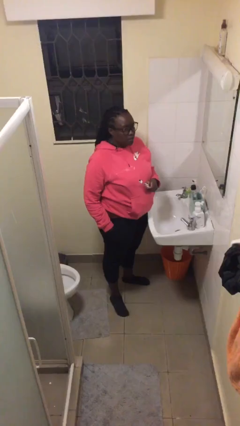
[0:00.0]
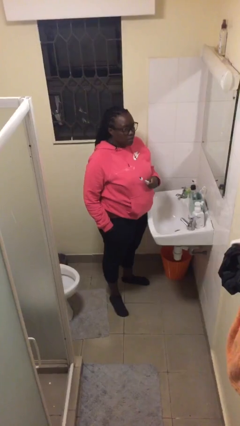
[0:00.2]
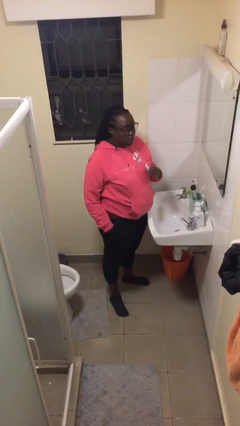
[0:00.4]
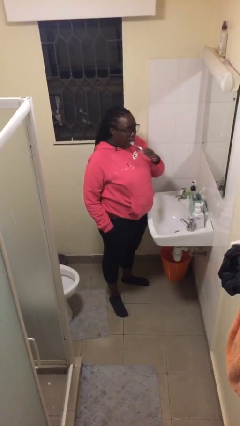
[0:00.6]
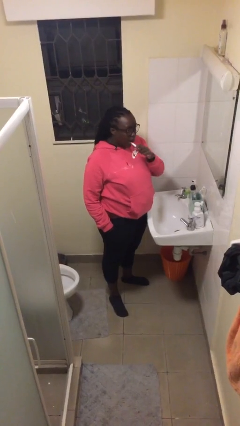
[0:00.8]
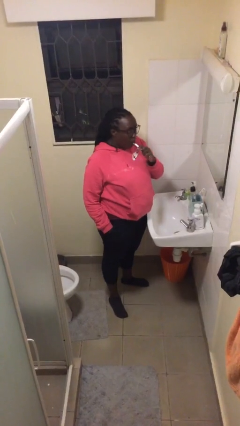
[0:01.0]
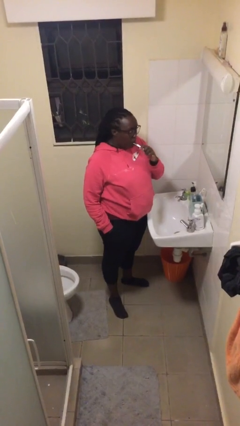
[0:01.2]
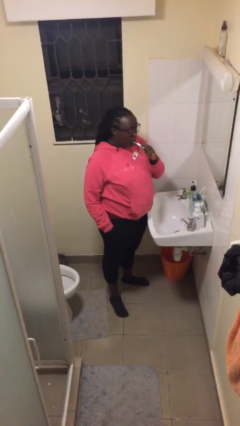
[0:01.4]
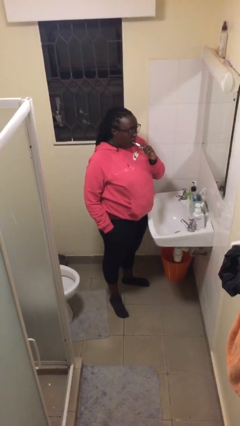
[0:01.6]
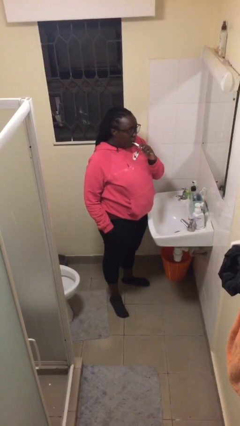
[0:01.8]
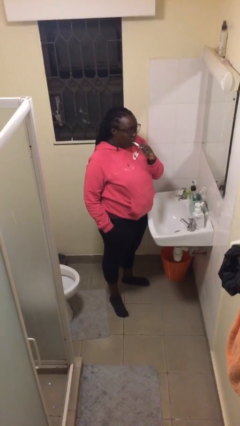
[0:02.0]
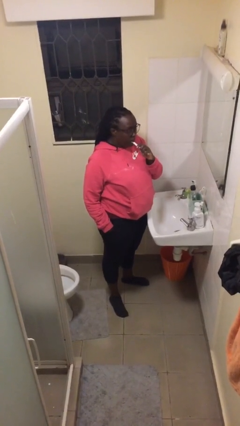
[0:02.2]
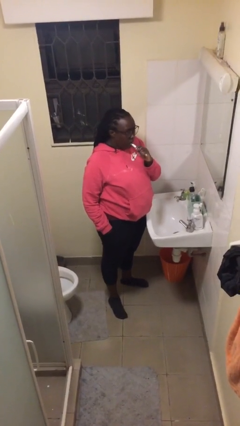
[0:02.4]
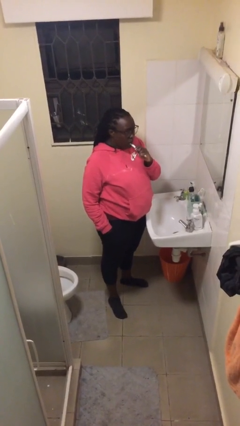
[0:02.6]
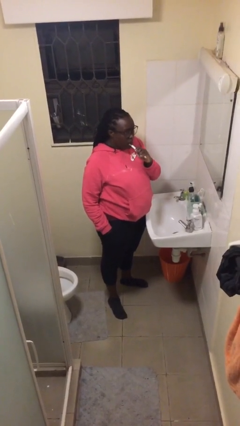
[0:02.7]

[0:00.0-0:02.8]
person brushes teeth

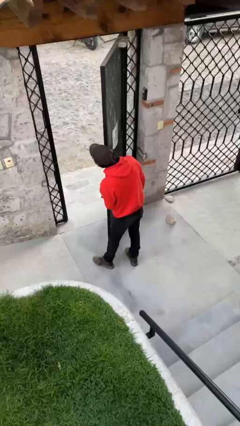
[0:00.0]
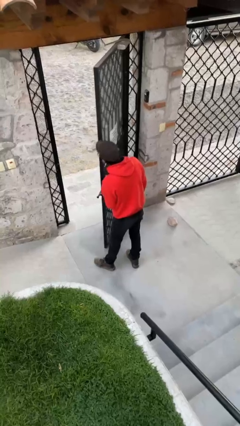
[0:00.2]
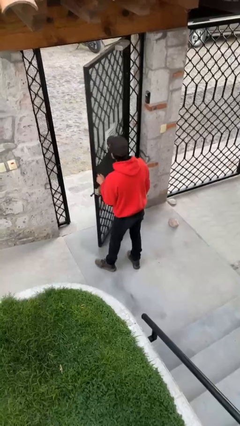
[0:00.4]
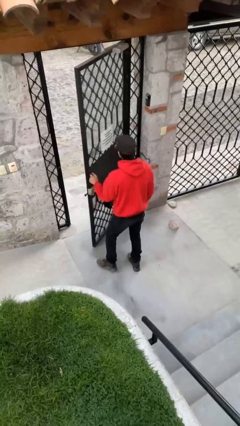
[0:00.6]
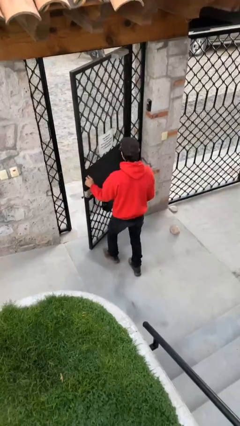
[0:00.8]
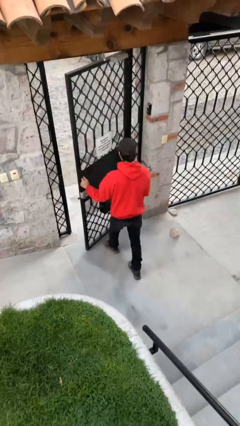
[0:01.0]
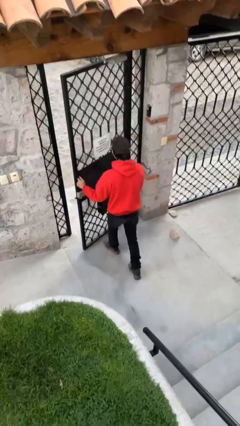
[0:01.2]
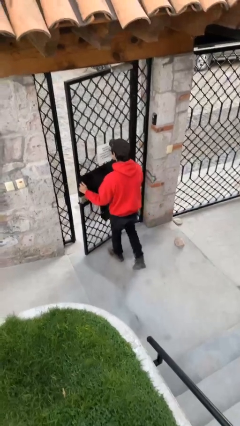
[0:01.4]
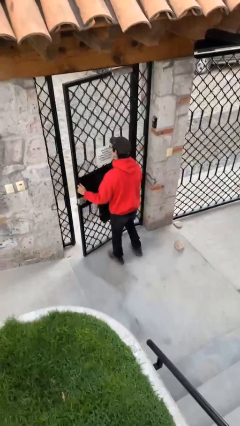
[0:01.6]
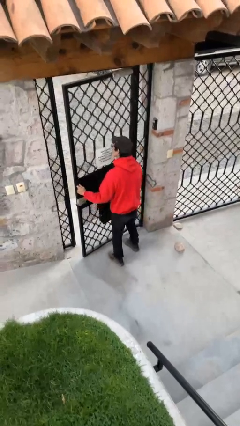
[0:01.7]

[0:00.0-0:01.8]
person closes facility door

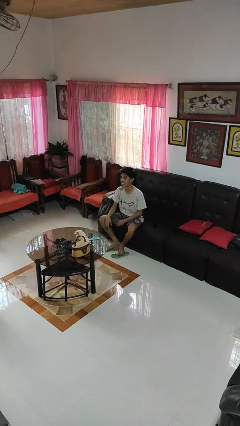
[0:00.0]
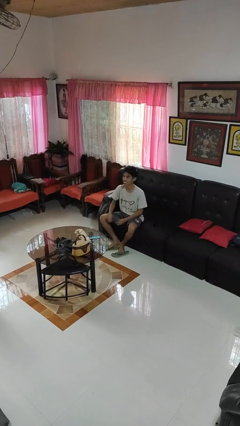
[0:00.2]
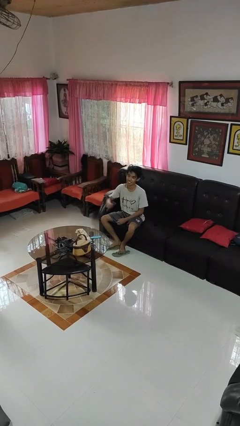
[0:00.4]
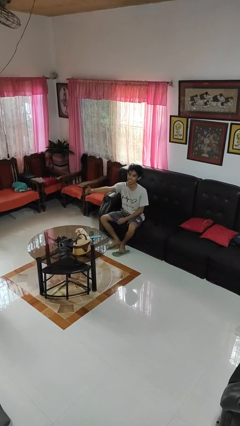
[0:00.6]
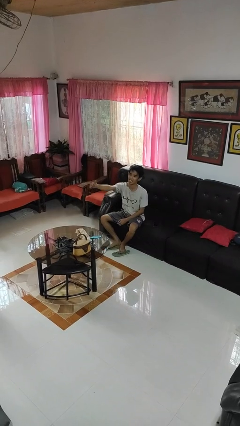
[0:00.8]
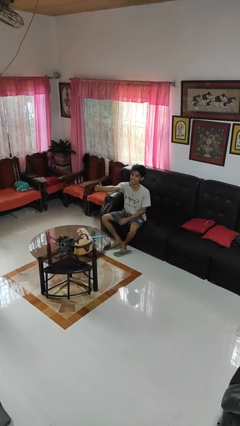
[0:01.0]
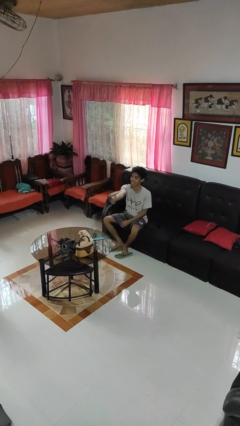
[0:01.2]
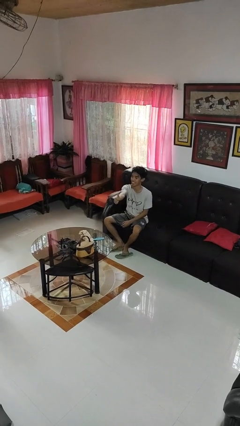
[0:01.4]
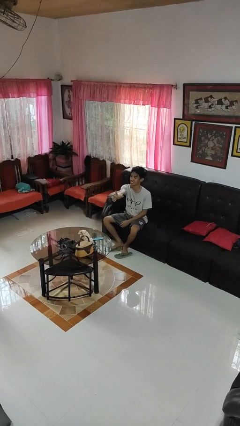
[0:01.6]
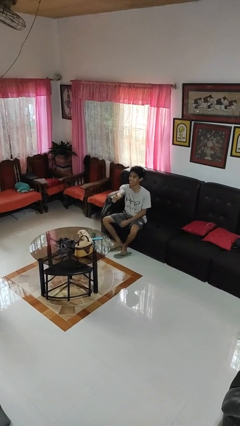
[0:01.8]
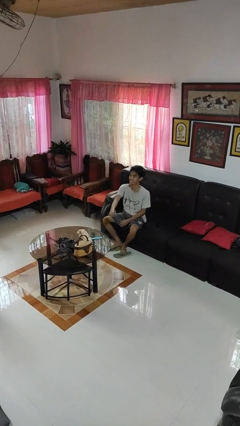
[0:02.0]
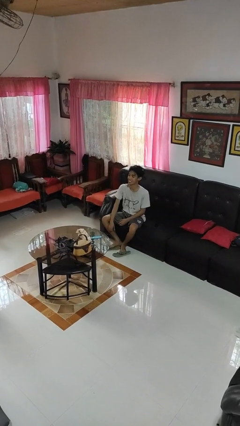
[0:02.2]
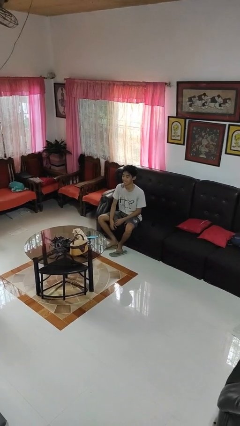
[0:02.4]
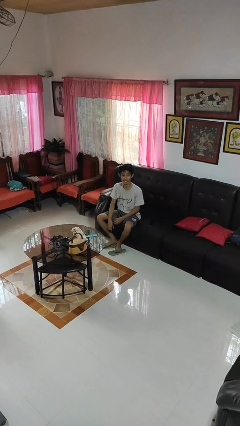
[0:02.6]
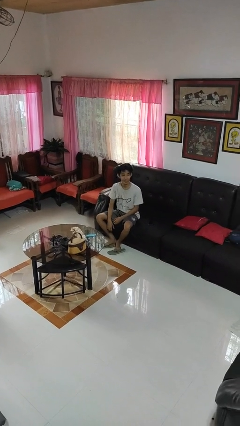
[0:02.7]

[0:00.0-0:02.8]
person gestures thumbs up

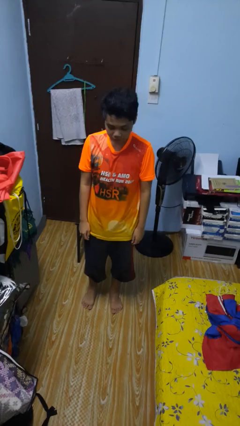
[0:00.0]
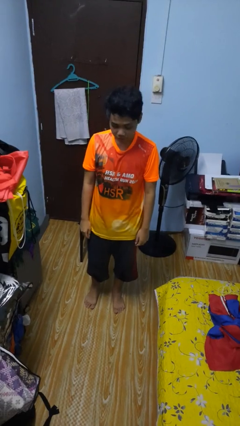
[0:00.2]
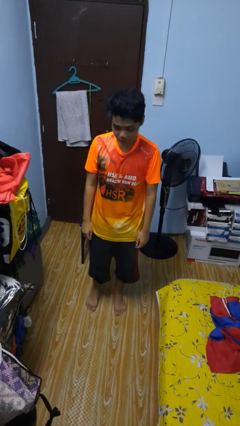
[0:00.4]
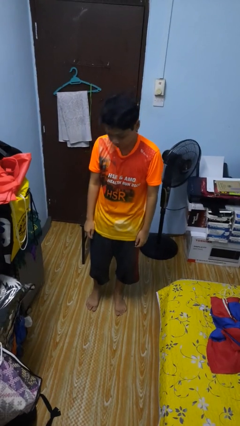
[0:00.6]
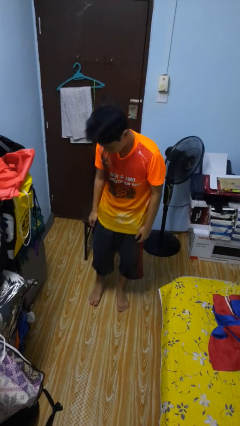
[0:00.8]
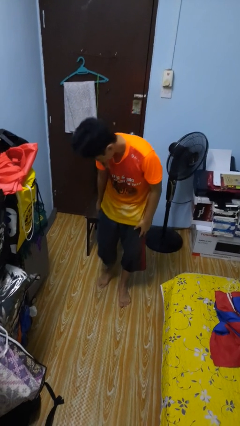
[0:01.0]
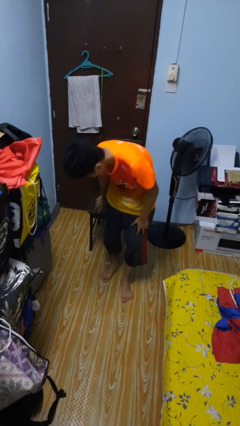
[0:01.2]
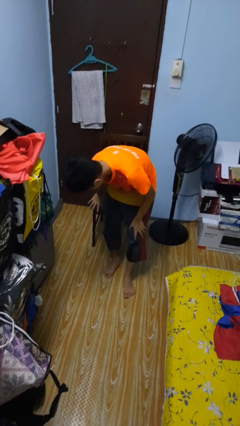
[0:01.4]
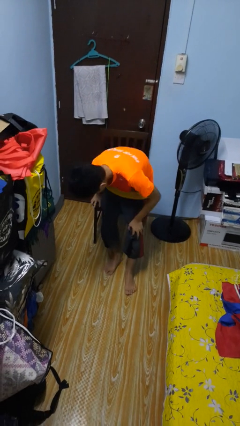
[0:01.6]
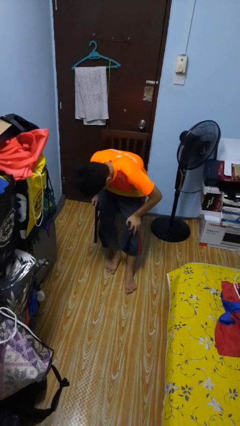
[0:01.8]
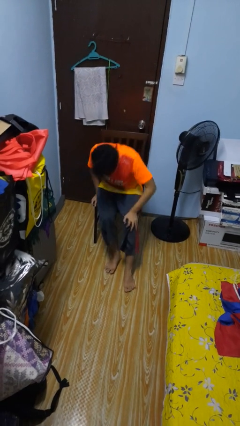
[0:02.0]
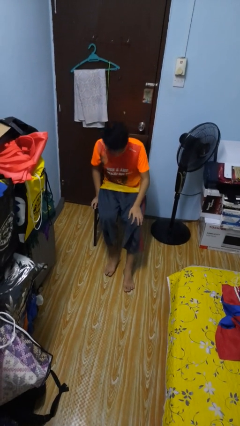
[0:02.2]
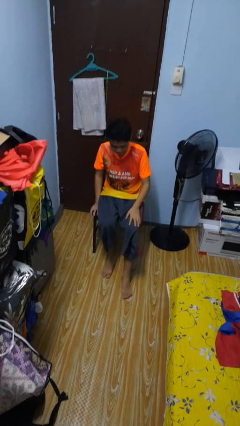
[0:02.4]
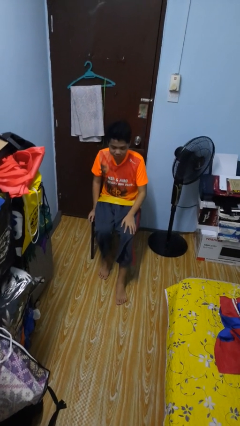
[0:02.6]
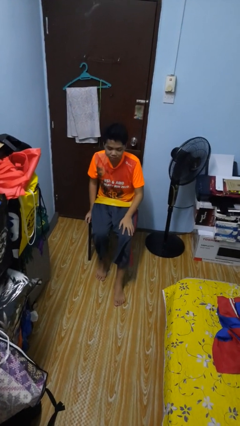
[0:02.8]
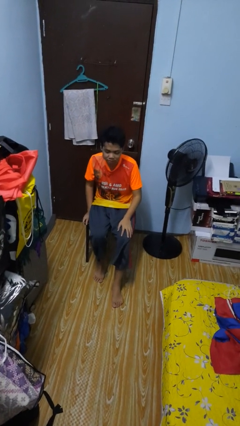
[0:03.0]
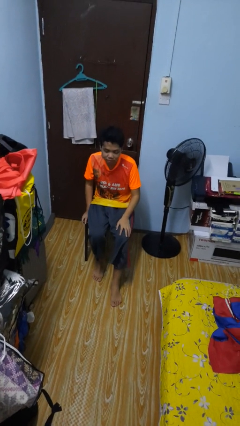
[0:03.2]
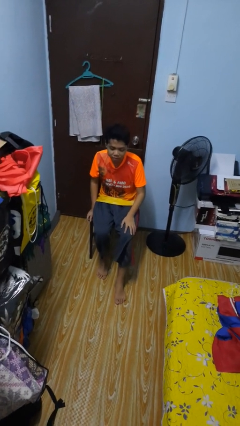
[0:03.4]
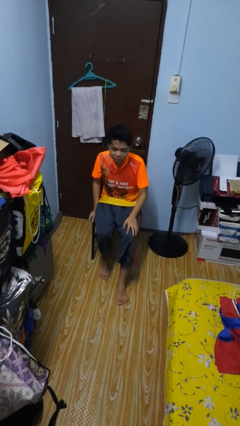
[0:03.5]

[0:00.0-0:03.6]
person sits down

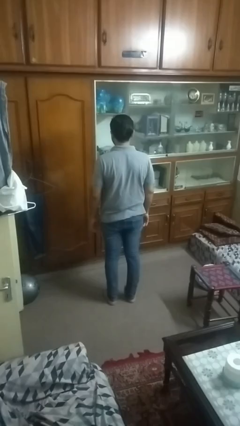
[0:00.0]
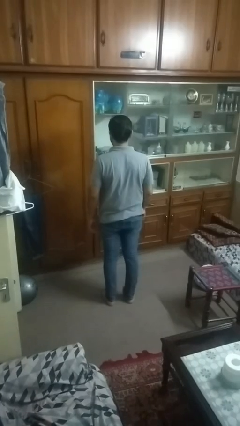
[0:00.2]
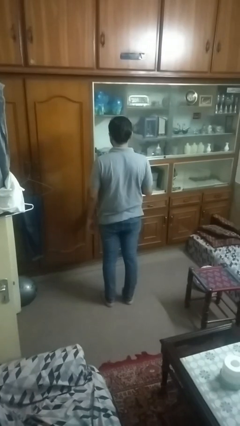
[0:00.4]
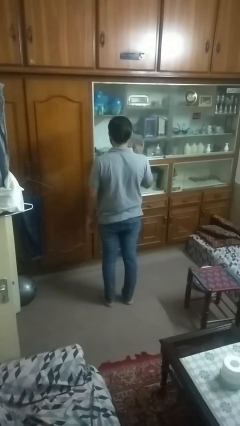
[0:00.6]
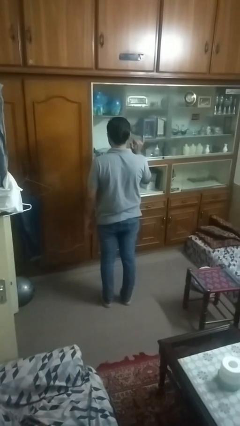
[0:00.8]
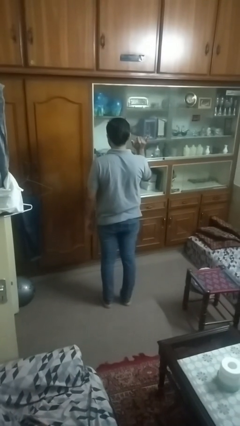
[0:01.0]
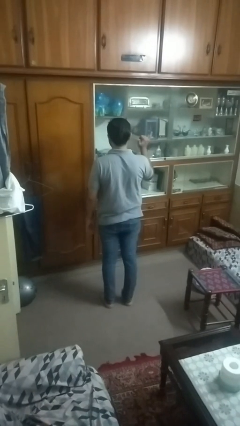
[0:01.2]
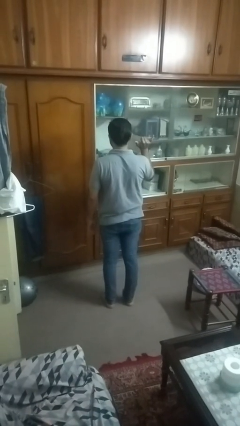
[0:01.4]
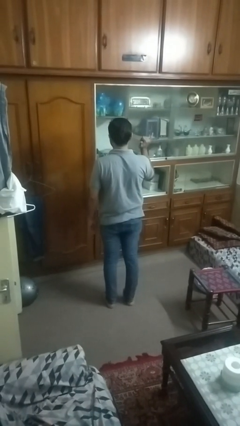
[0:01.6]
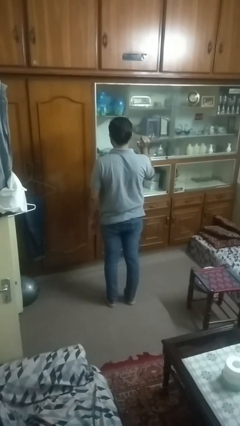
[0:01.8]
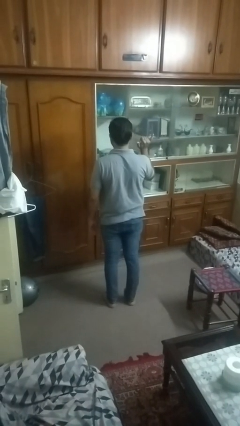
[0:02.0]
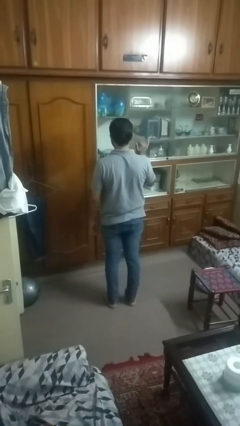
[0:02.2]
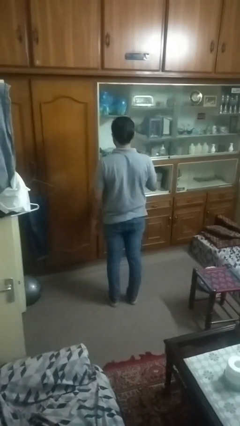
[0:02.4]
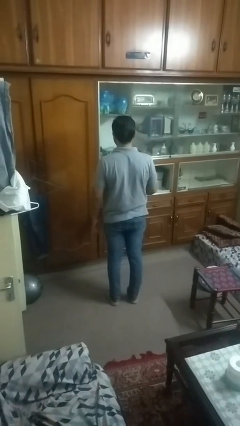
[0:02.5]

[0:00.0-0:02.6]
person gestures hang loose

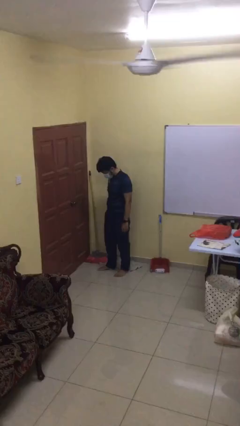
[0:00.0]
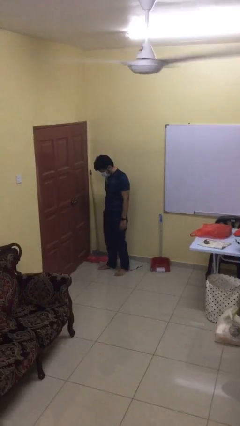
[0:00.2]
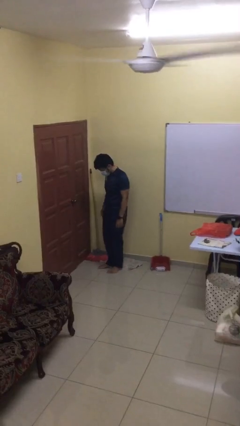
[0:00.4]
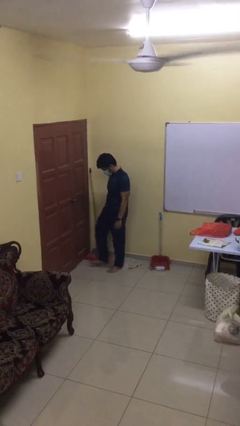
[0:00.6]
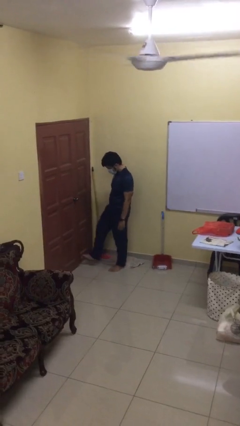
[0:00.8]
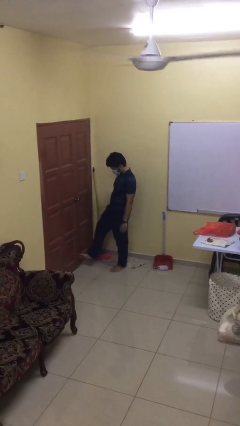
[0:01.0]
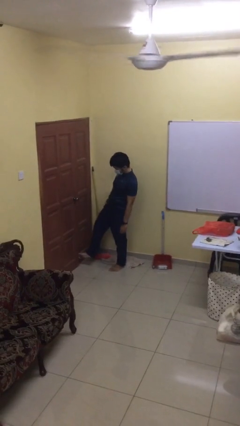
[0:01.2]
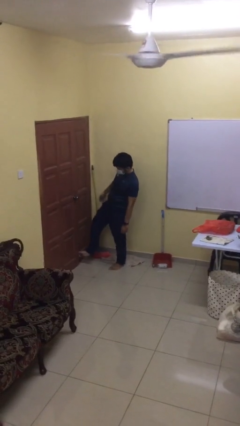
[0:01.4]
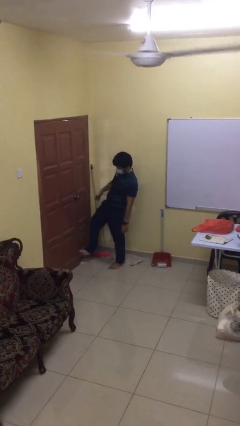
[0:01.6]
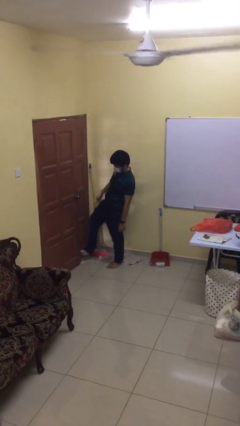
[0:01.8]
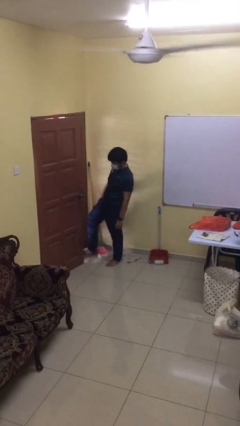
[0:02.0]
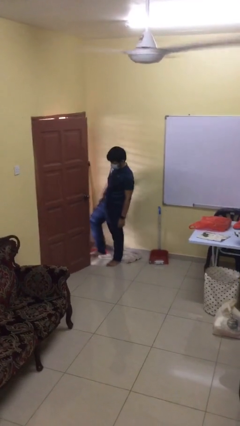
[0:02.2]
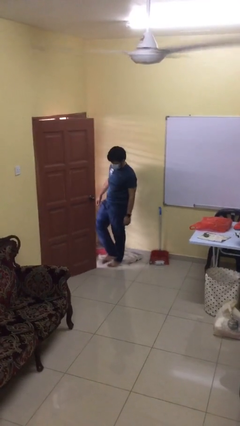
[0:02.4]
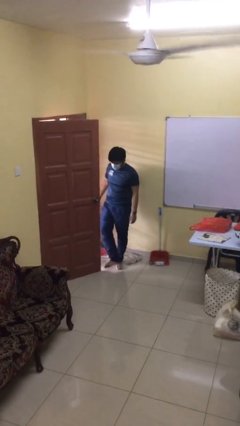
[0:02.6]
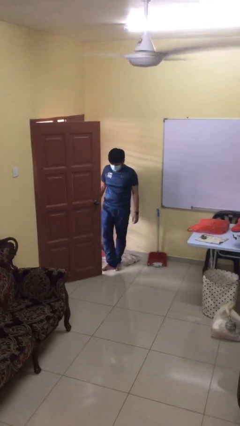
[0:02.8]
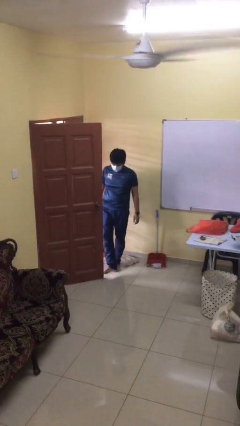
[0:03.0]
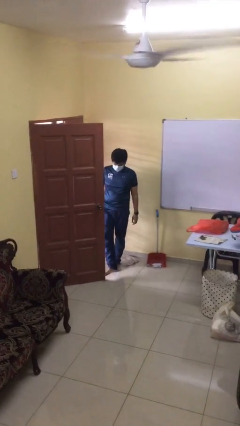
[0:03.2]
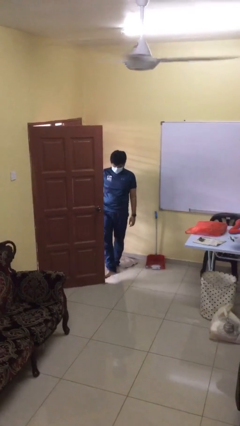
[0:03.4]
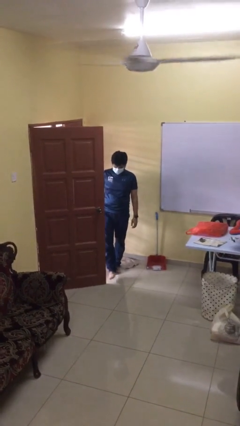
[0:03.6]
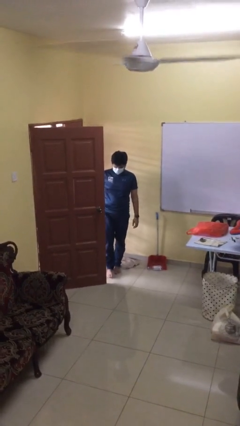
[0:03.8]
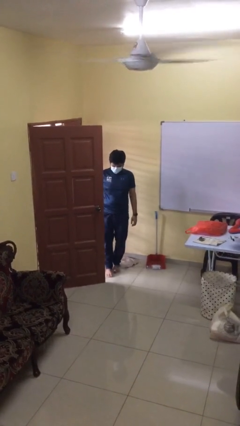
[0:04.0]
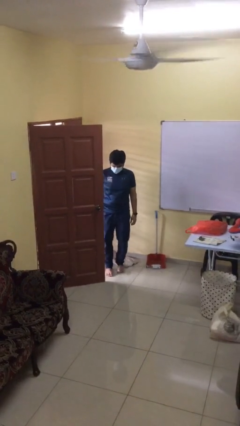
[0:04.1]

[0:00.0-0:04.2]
person opens facility door
